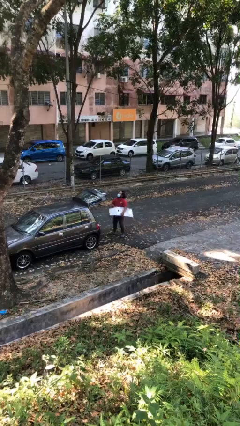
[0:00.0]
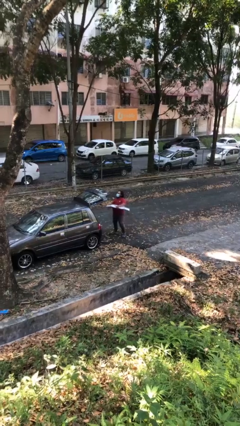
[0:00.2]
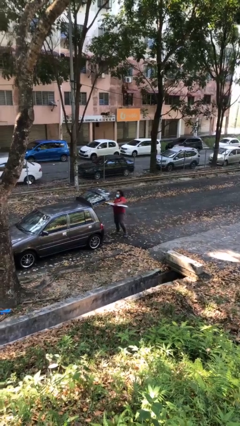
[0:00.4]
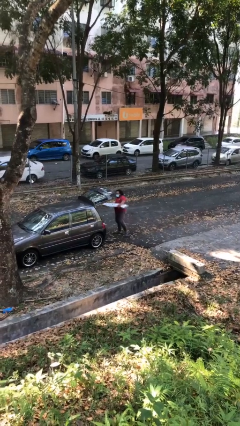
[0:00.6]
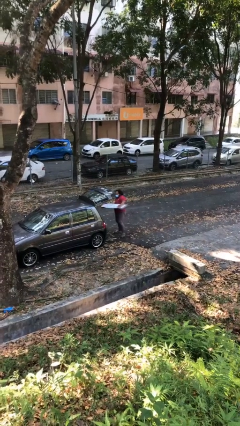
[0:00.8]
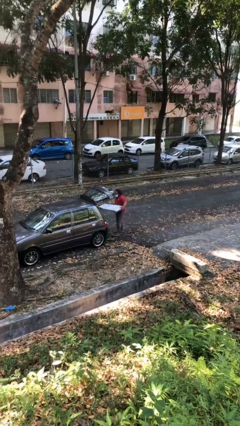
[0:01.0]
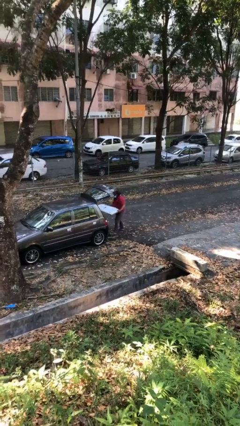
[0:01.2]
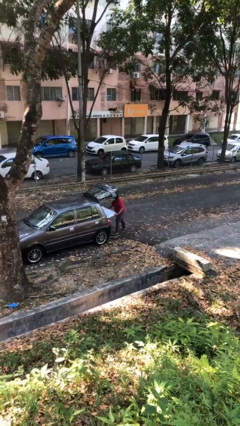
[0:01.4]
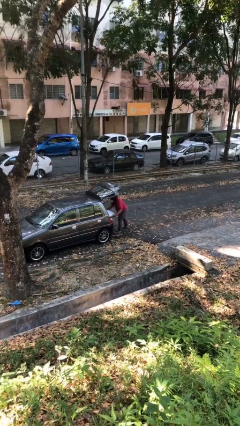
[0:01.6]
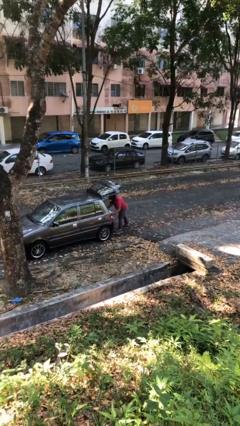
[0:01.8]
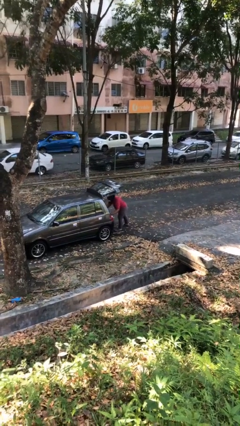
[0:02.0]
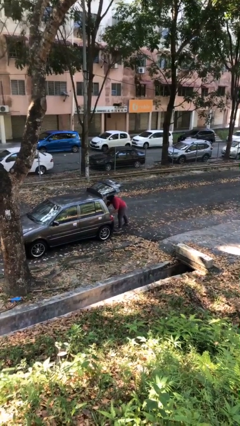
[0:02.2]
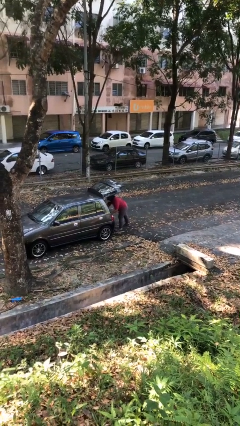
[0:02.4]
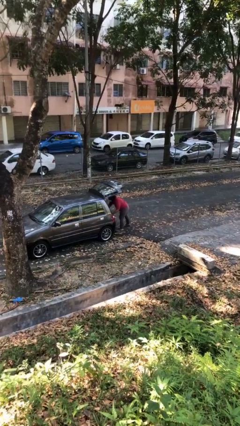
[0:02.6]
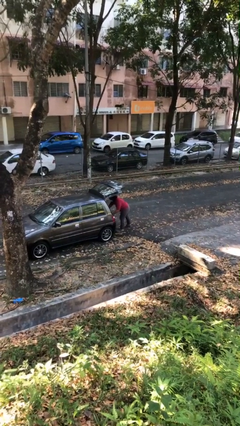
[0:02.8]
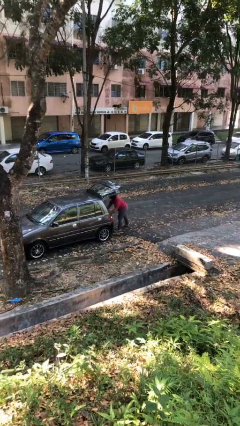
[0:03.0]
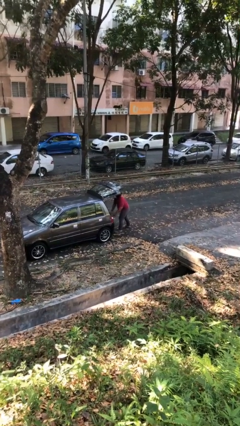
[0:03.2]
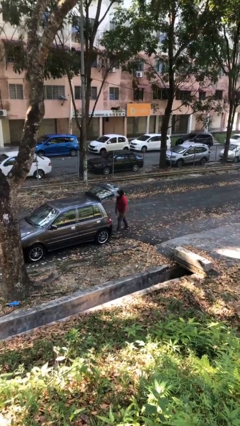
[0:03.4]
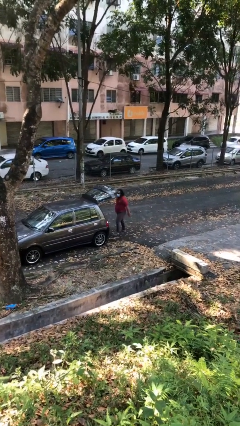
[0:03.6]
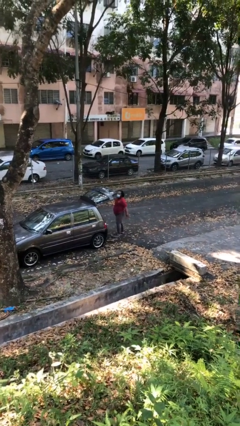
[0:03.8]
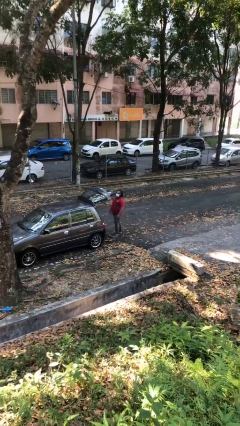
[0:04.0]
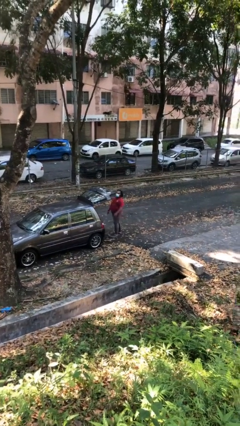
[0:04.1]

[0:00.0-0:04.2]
person loads car

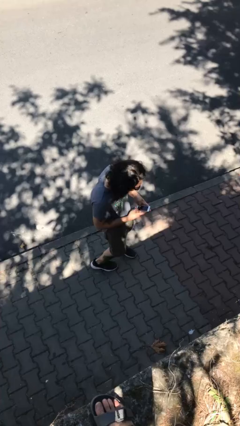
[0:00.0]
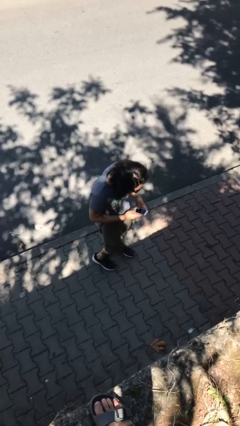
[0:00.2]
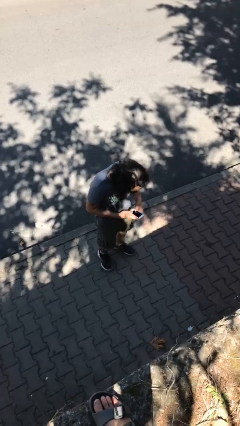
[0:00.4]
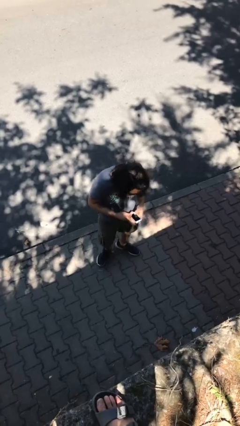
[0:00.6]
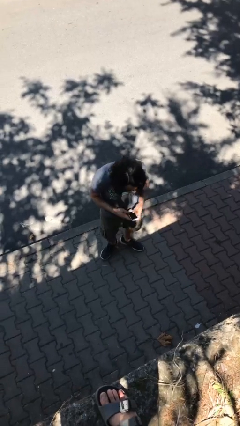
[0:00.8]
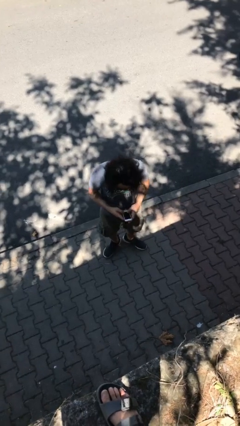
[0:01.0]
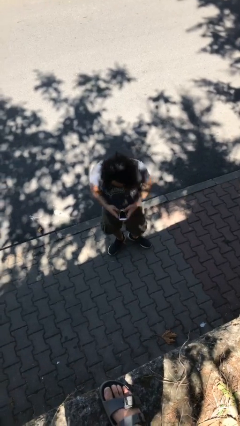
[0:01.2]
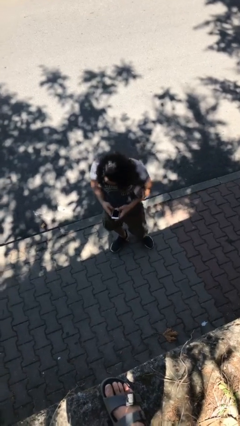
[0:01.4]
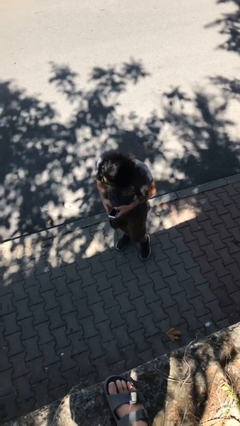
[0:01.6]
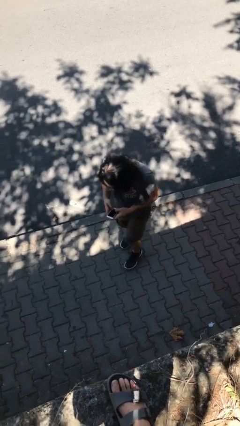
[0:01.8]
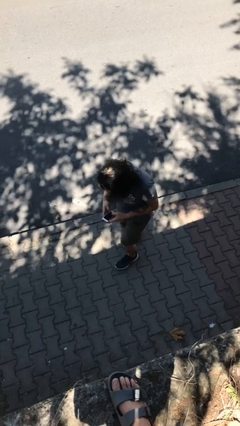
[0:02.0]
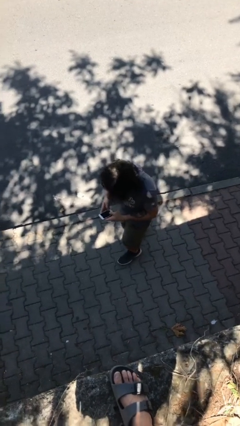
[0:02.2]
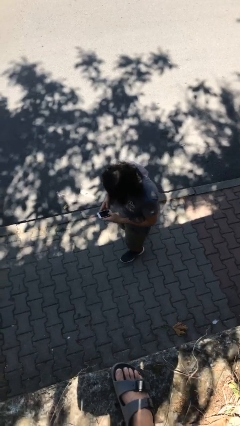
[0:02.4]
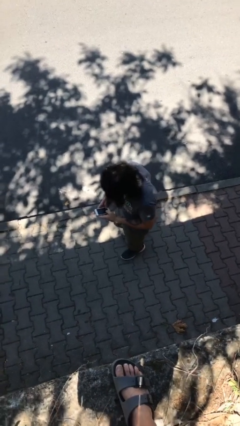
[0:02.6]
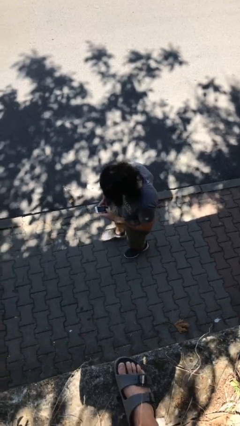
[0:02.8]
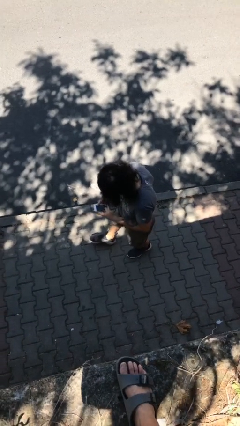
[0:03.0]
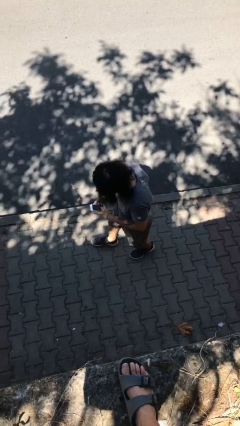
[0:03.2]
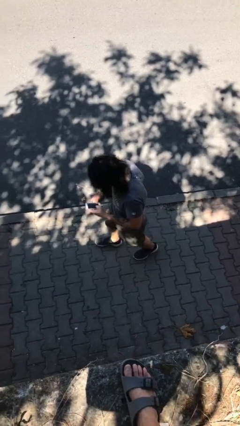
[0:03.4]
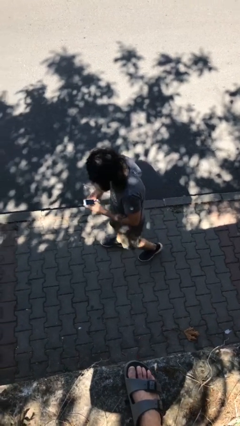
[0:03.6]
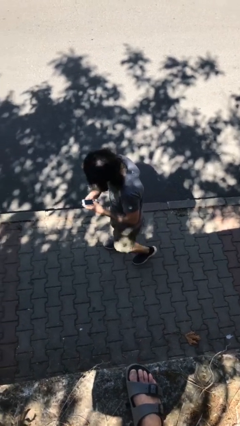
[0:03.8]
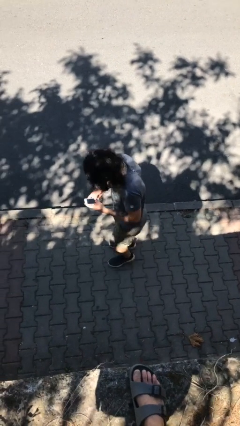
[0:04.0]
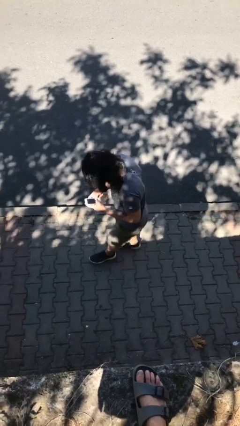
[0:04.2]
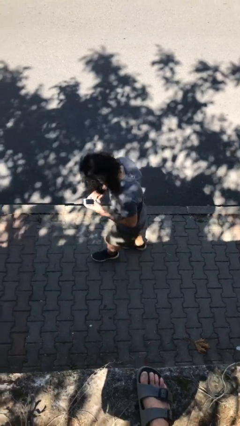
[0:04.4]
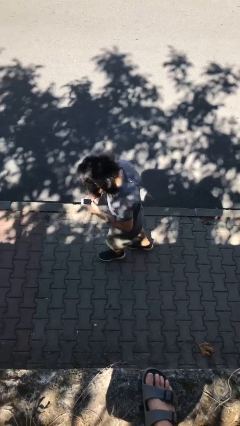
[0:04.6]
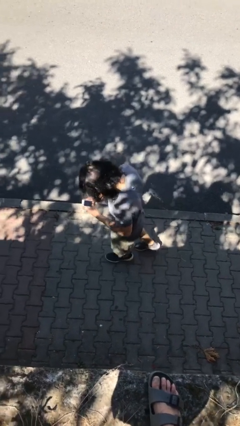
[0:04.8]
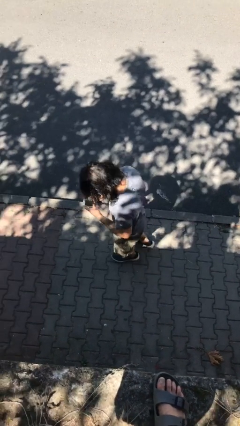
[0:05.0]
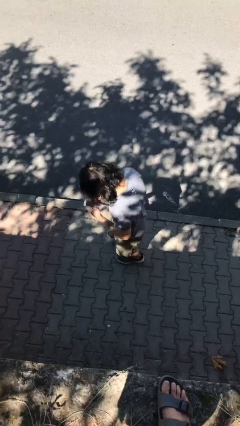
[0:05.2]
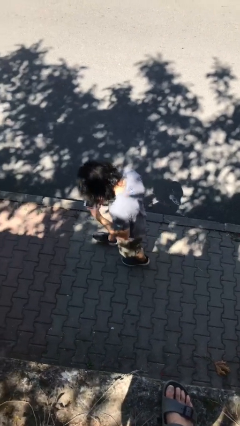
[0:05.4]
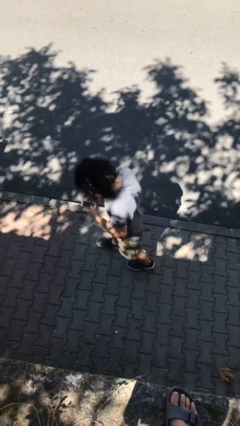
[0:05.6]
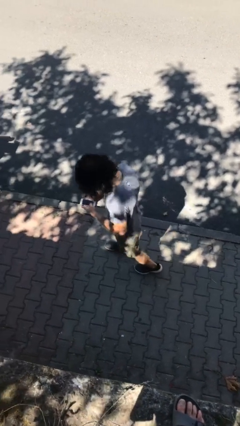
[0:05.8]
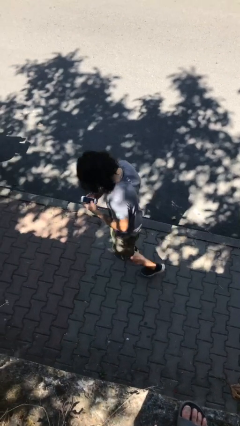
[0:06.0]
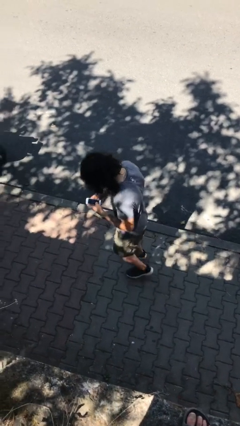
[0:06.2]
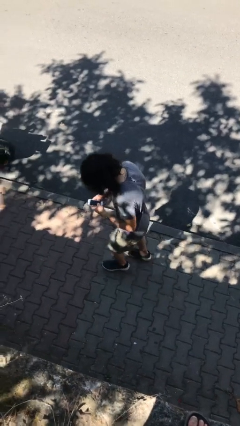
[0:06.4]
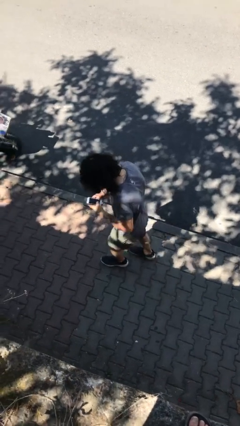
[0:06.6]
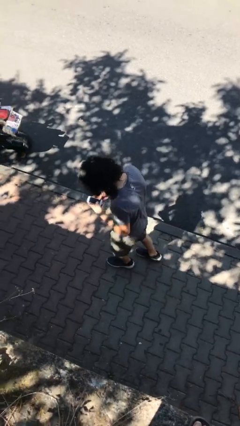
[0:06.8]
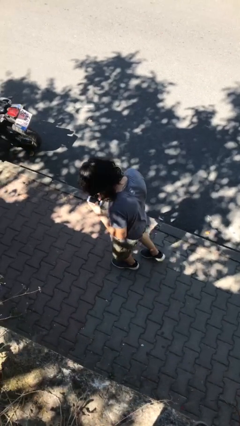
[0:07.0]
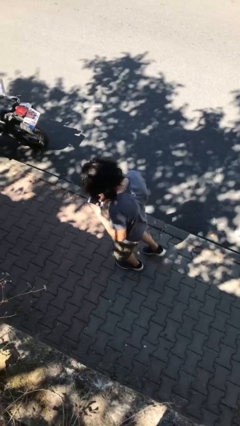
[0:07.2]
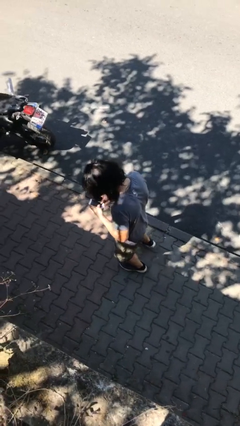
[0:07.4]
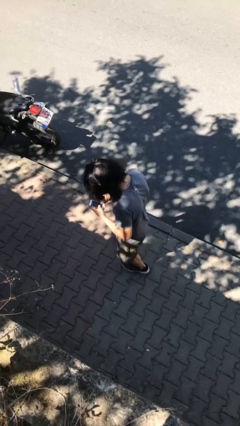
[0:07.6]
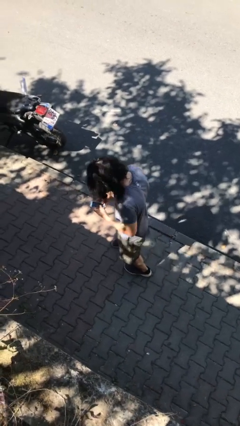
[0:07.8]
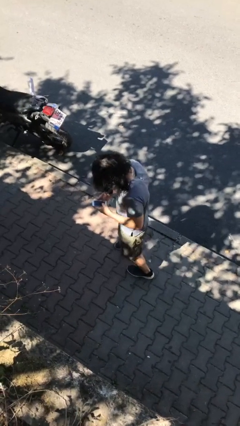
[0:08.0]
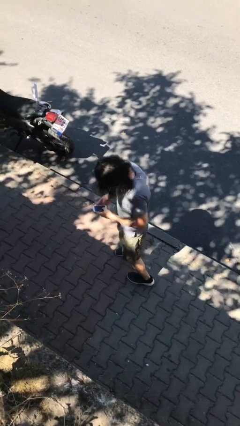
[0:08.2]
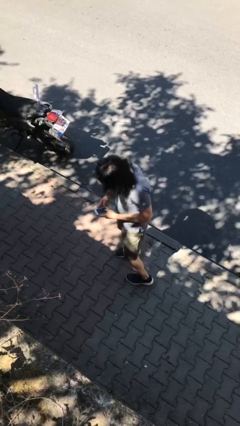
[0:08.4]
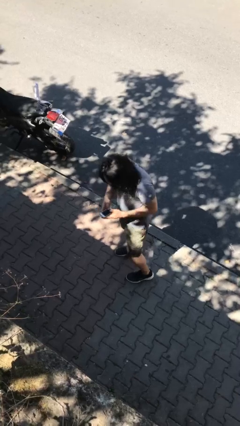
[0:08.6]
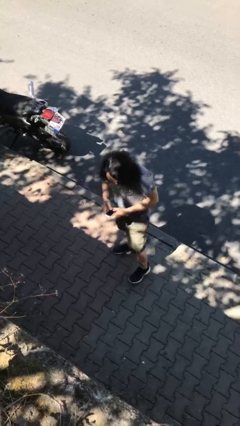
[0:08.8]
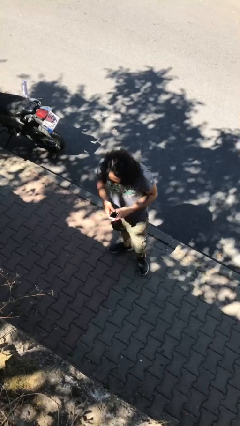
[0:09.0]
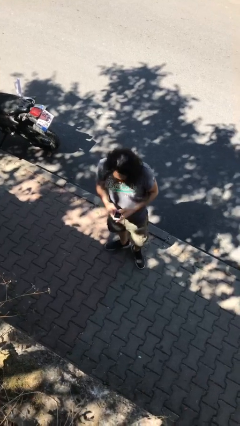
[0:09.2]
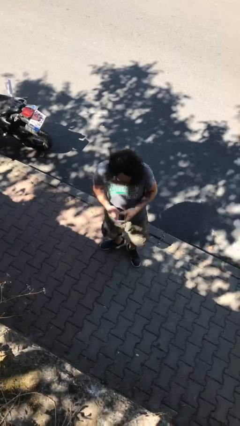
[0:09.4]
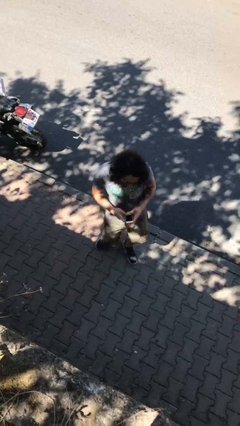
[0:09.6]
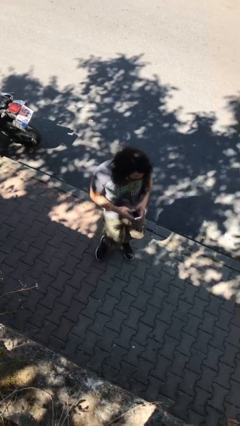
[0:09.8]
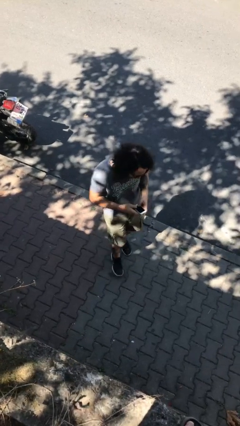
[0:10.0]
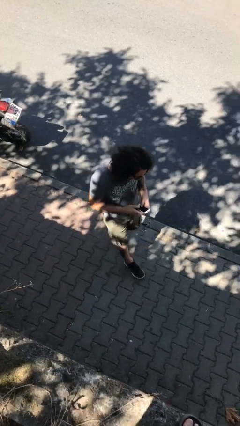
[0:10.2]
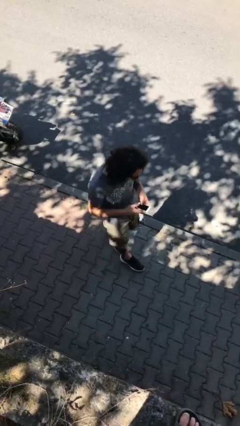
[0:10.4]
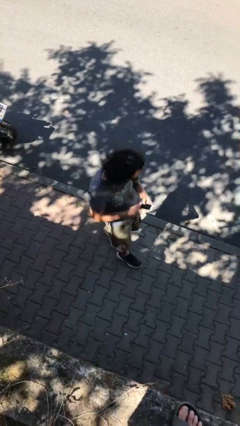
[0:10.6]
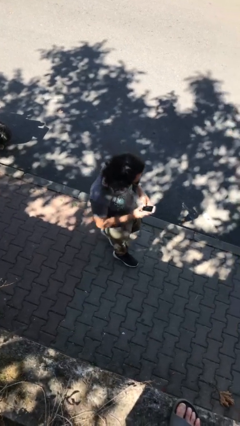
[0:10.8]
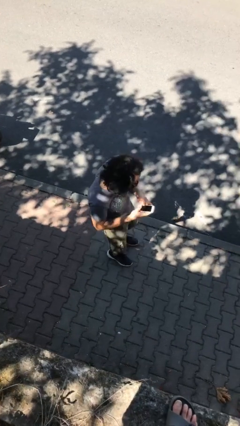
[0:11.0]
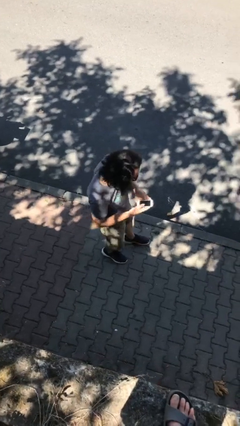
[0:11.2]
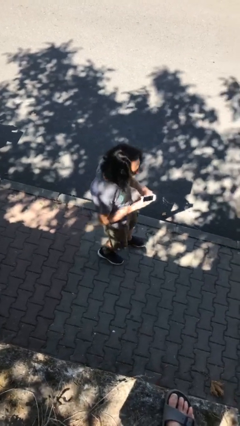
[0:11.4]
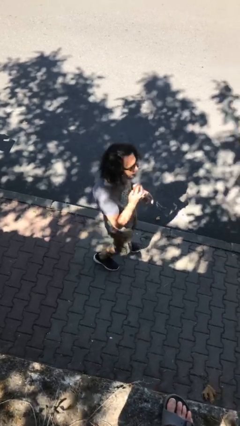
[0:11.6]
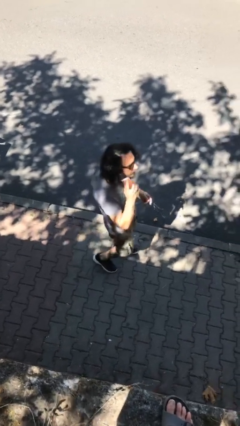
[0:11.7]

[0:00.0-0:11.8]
person texts on phone

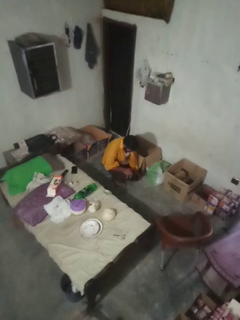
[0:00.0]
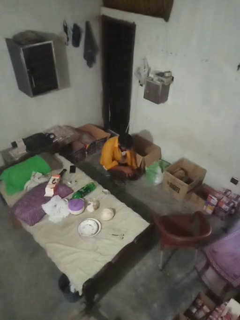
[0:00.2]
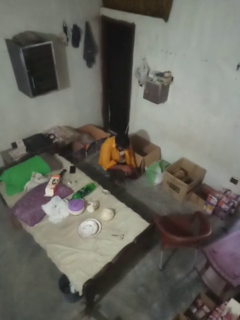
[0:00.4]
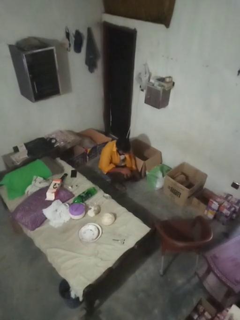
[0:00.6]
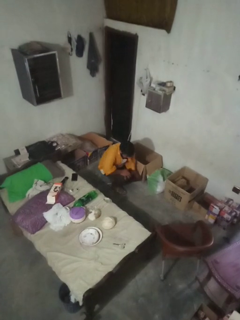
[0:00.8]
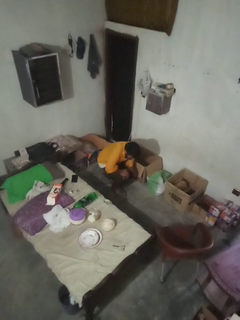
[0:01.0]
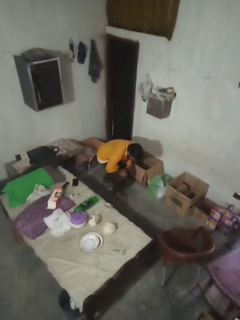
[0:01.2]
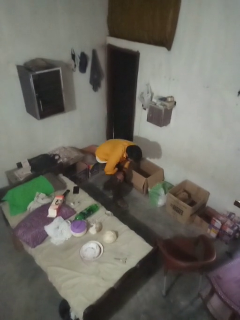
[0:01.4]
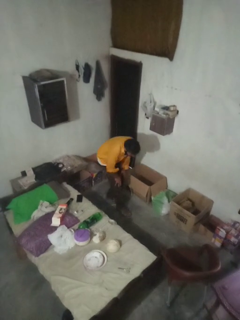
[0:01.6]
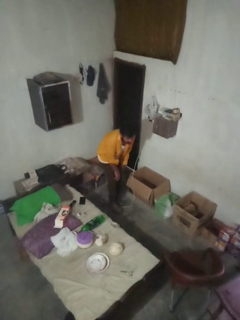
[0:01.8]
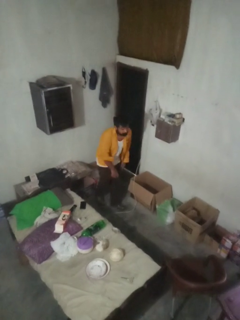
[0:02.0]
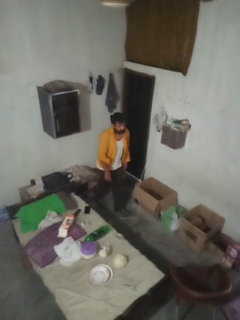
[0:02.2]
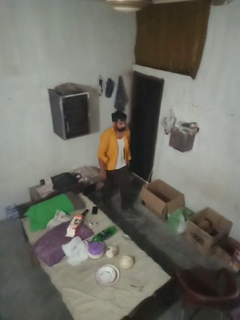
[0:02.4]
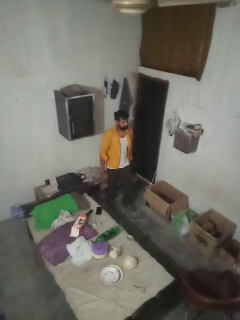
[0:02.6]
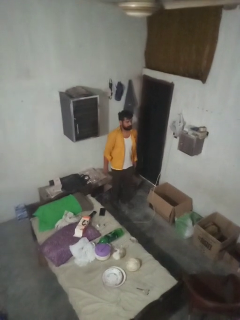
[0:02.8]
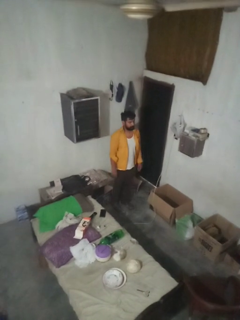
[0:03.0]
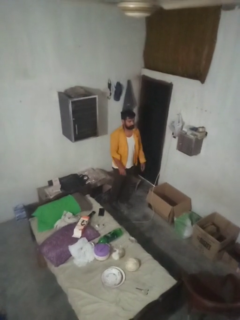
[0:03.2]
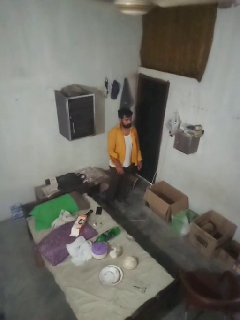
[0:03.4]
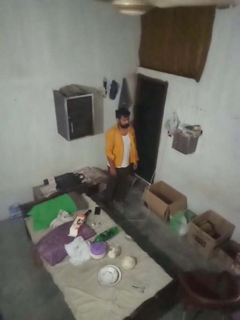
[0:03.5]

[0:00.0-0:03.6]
person stands up from floor
